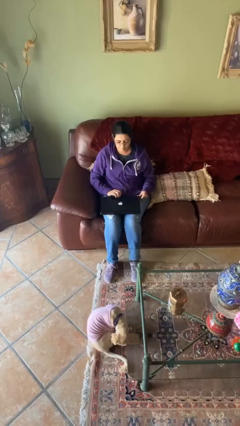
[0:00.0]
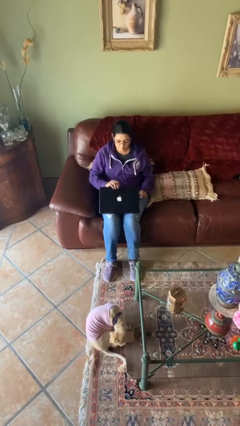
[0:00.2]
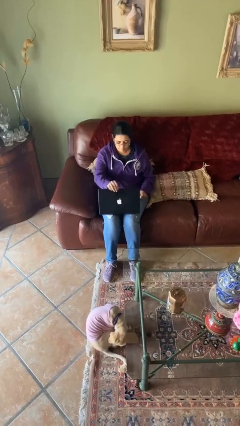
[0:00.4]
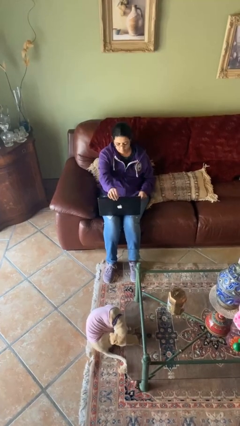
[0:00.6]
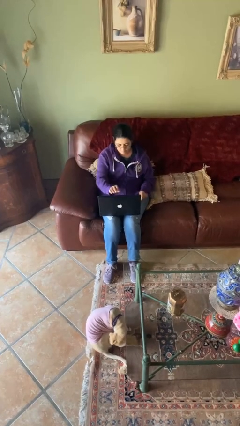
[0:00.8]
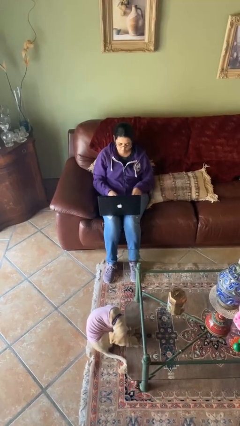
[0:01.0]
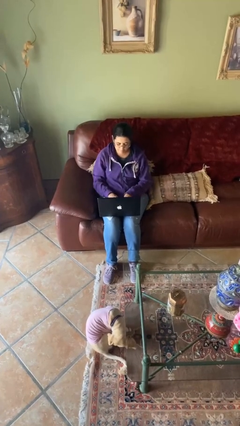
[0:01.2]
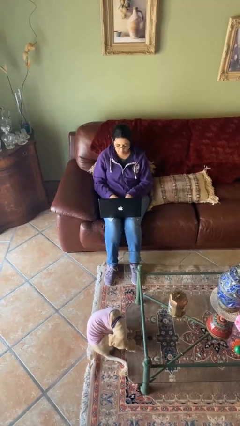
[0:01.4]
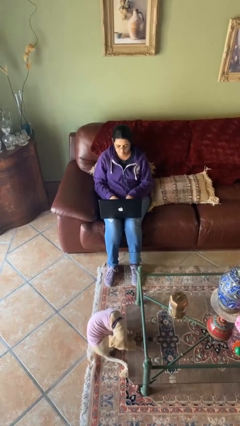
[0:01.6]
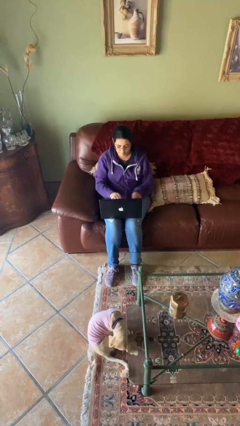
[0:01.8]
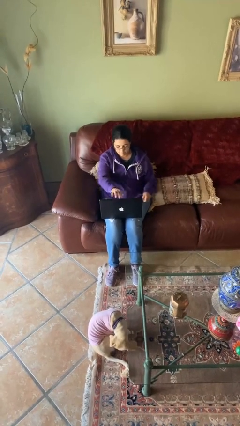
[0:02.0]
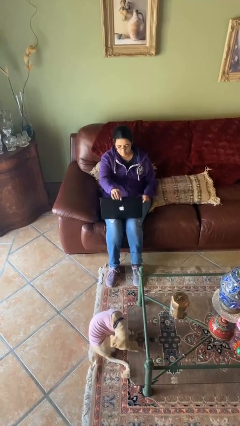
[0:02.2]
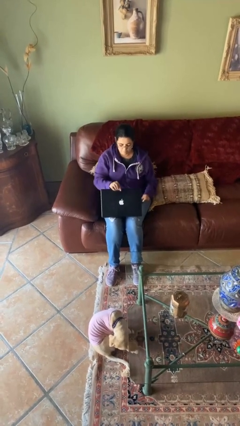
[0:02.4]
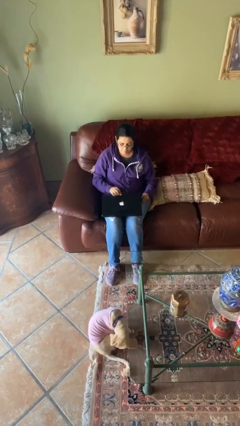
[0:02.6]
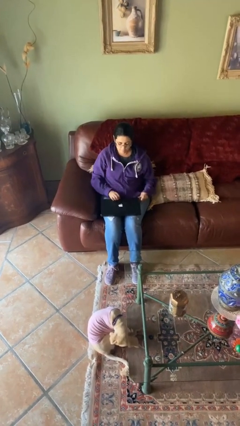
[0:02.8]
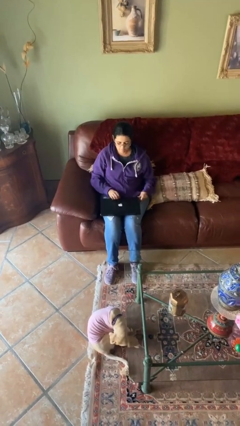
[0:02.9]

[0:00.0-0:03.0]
person interacts with laptop

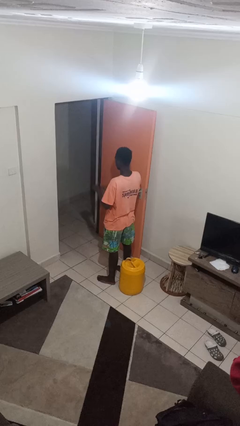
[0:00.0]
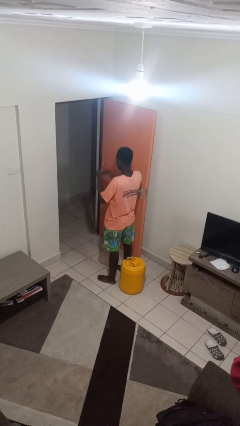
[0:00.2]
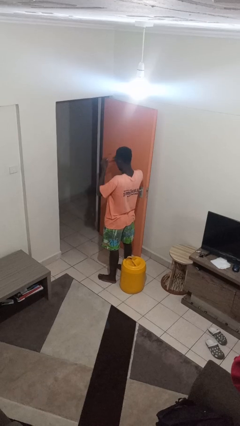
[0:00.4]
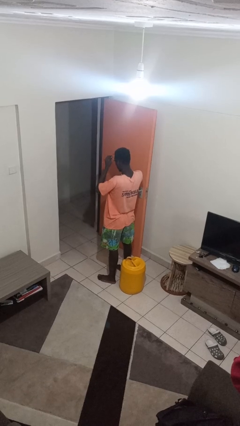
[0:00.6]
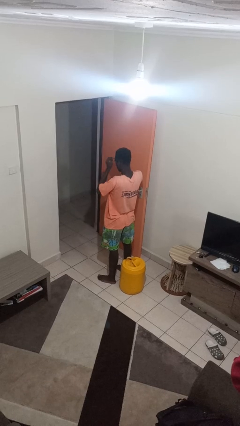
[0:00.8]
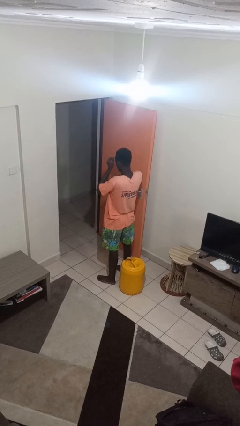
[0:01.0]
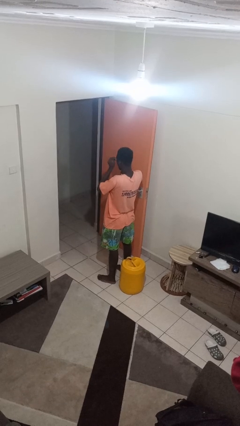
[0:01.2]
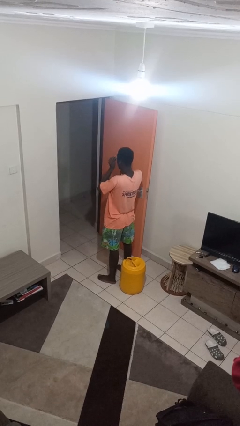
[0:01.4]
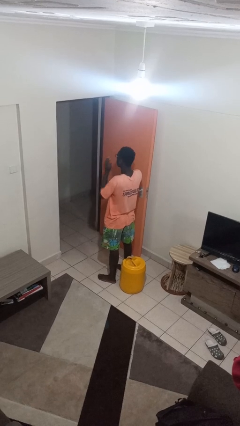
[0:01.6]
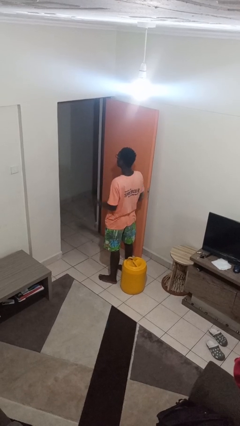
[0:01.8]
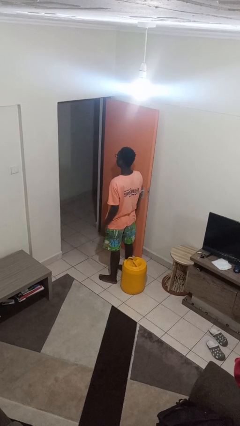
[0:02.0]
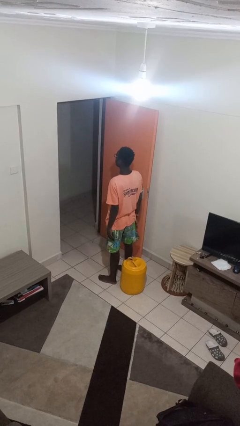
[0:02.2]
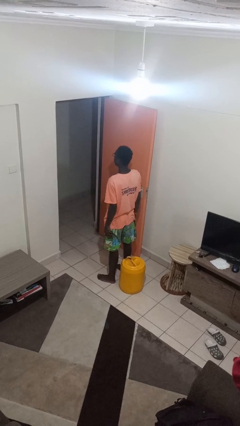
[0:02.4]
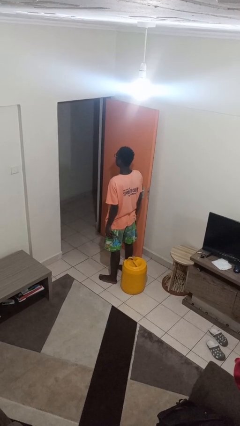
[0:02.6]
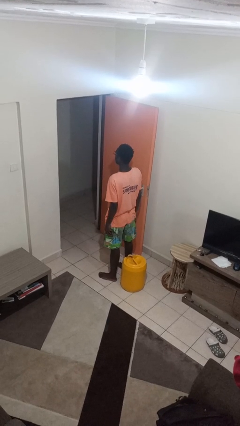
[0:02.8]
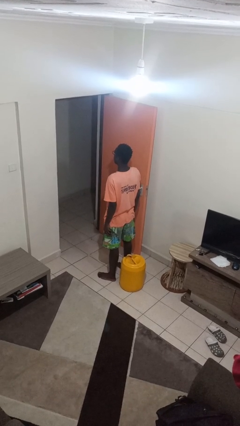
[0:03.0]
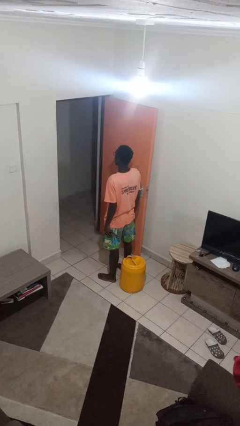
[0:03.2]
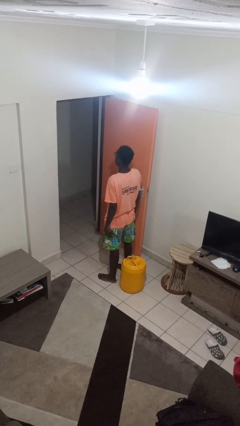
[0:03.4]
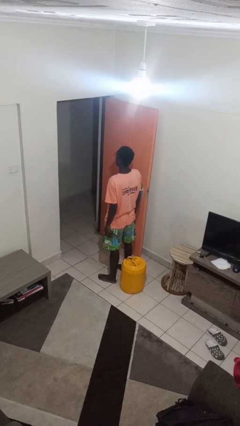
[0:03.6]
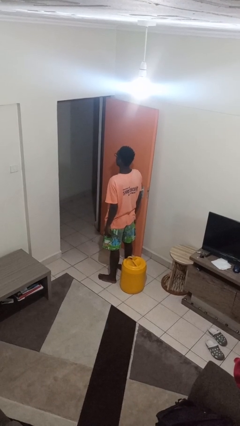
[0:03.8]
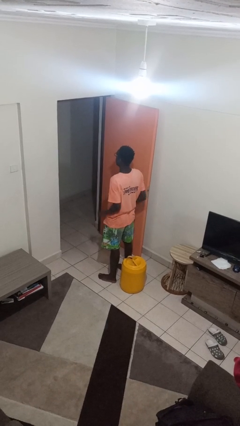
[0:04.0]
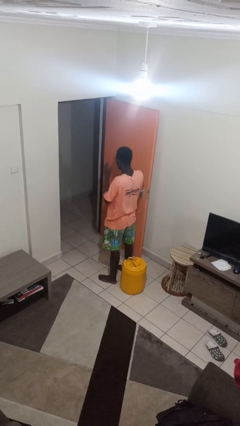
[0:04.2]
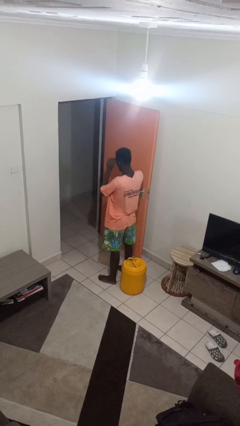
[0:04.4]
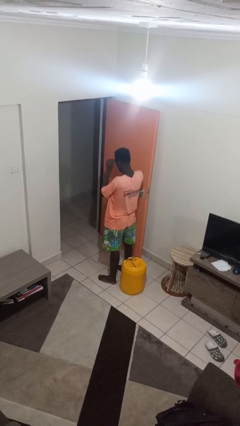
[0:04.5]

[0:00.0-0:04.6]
person puts on glasses

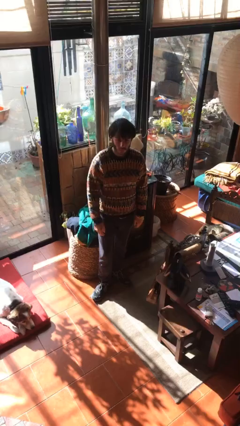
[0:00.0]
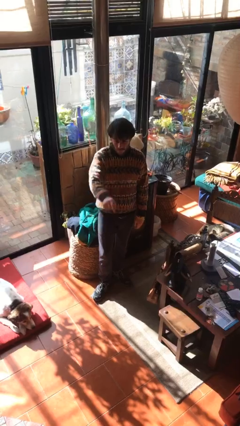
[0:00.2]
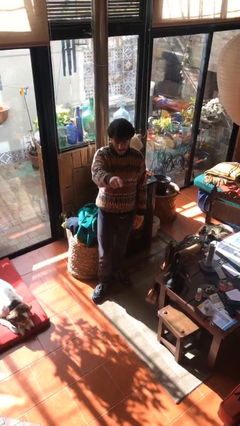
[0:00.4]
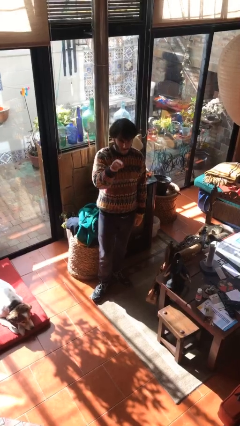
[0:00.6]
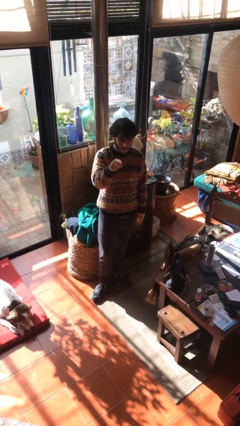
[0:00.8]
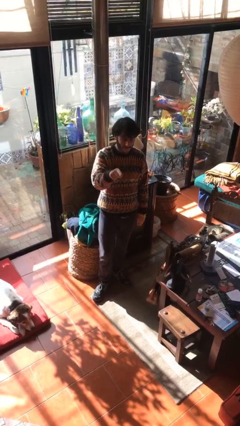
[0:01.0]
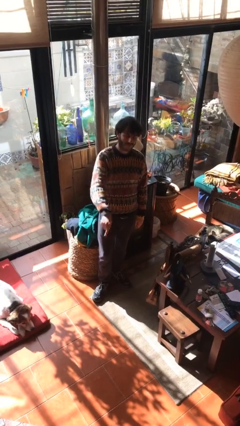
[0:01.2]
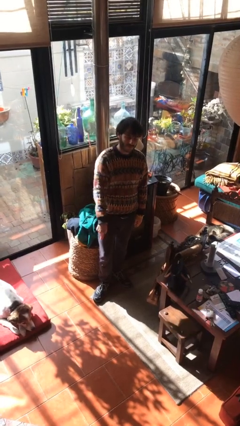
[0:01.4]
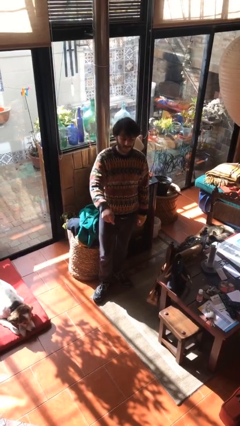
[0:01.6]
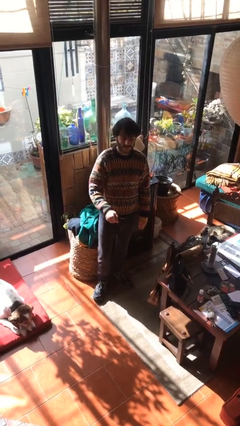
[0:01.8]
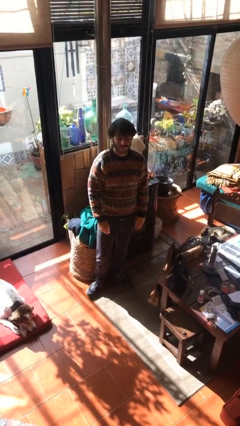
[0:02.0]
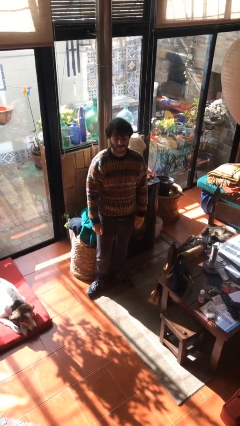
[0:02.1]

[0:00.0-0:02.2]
person points at person

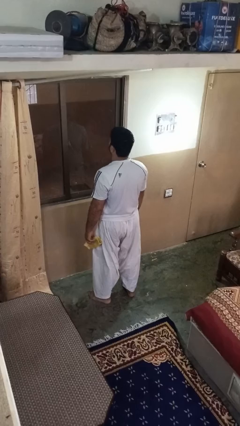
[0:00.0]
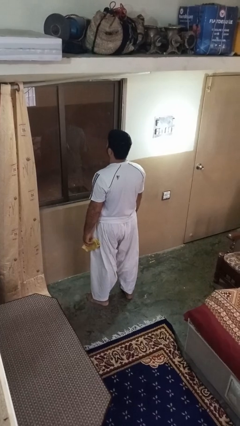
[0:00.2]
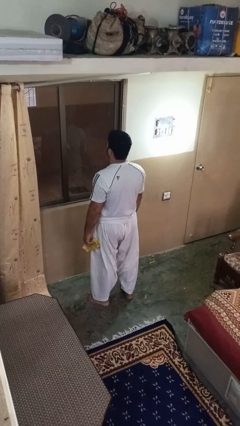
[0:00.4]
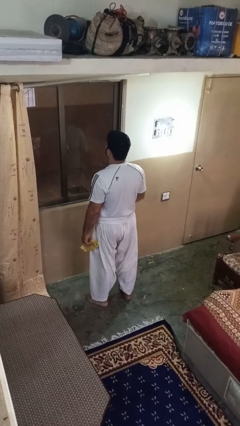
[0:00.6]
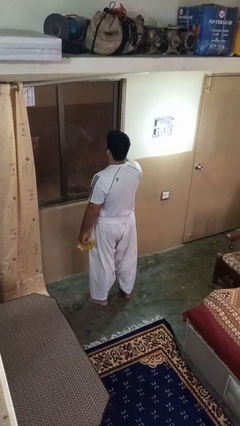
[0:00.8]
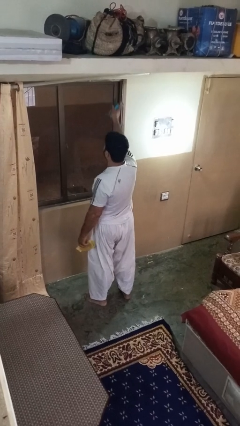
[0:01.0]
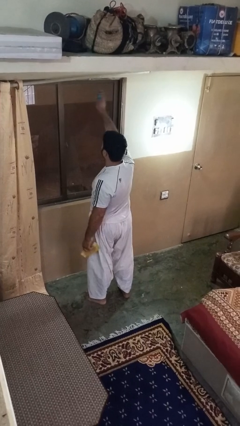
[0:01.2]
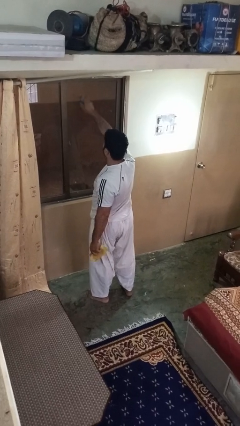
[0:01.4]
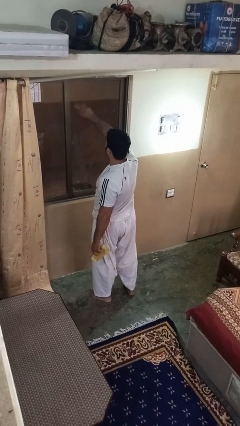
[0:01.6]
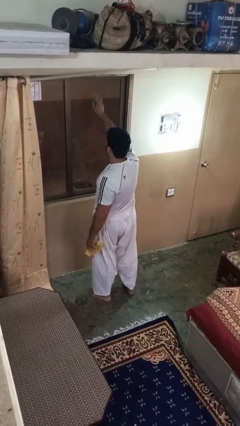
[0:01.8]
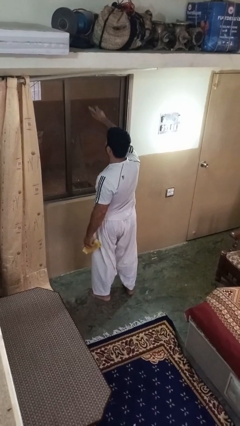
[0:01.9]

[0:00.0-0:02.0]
person sprays from bottle

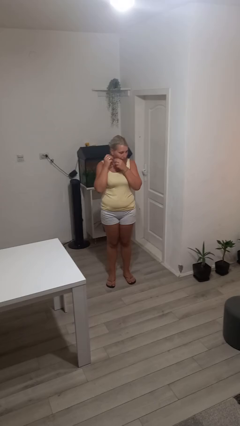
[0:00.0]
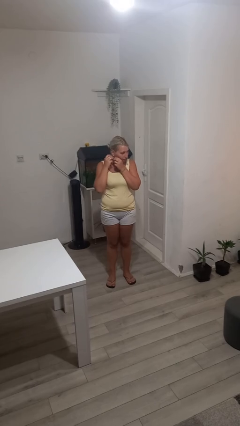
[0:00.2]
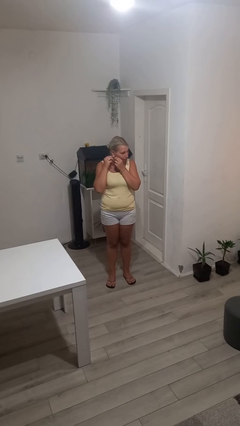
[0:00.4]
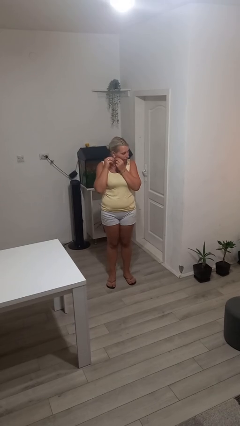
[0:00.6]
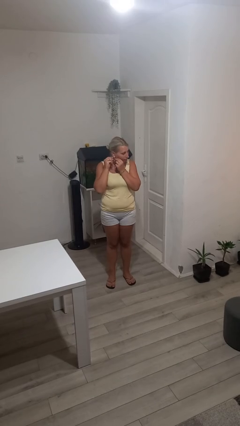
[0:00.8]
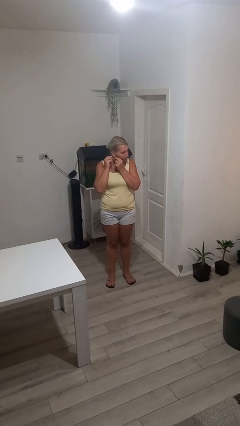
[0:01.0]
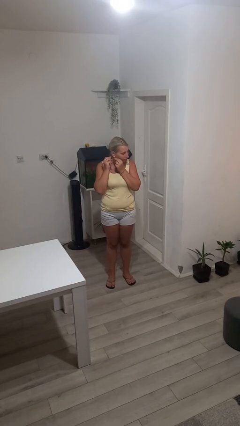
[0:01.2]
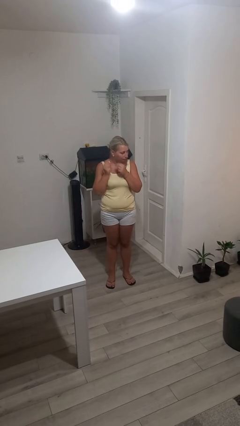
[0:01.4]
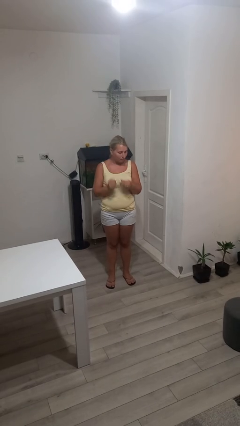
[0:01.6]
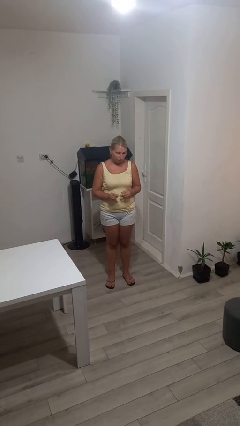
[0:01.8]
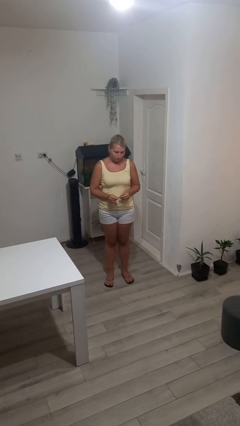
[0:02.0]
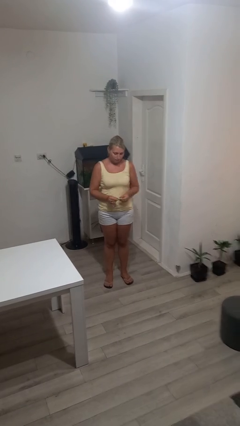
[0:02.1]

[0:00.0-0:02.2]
person takes off earrings

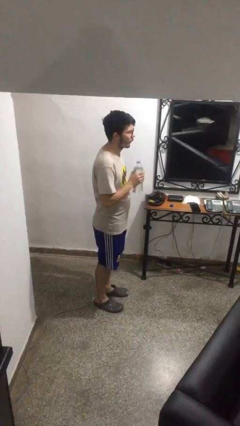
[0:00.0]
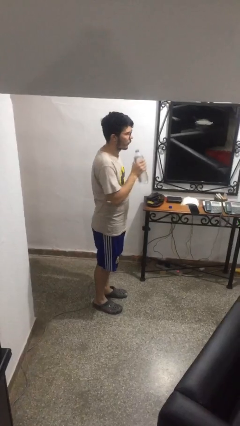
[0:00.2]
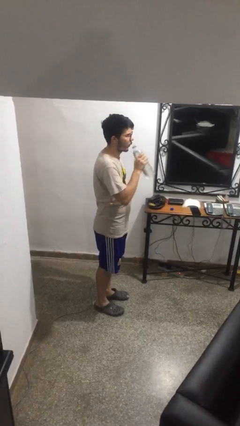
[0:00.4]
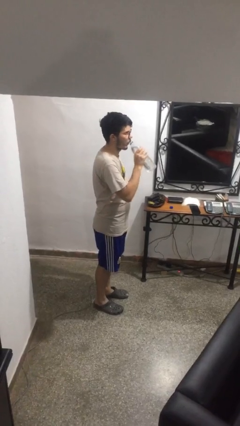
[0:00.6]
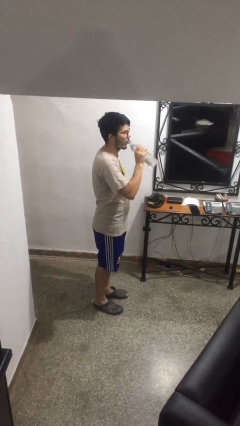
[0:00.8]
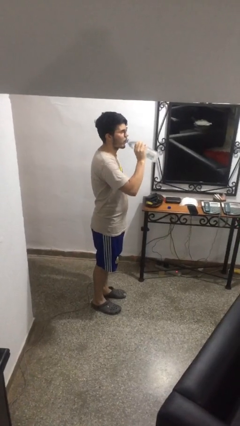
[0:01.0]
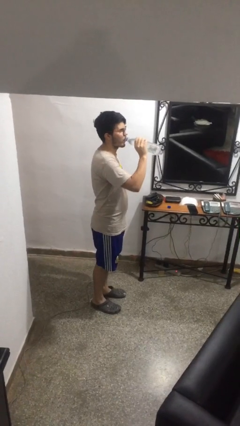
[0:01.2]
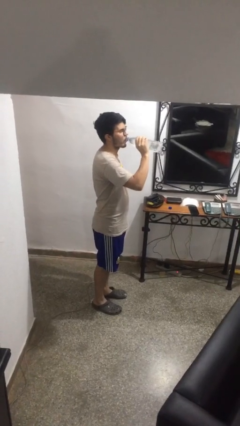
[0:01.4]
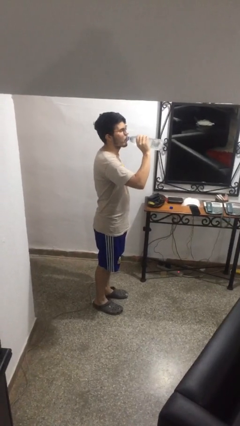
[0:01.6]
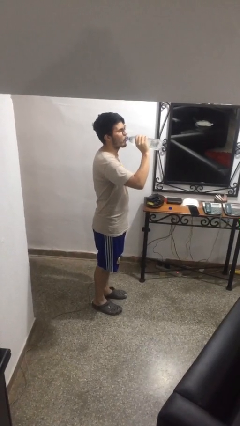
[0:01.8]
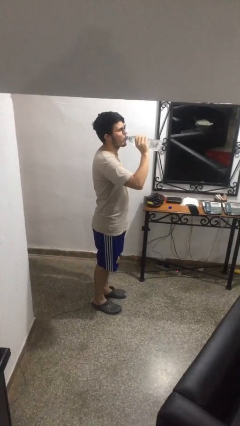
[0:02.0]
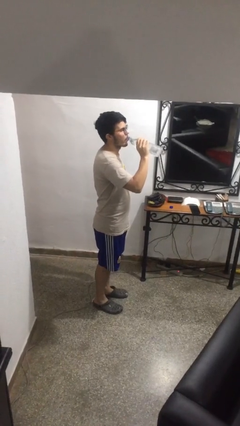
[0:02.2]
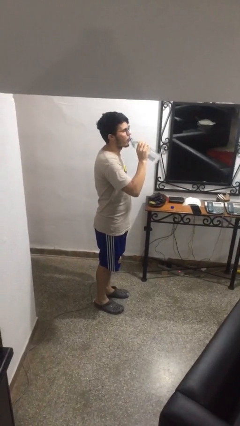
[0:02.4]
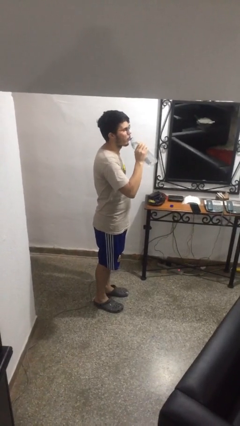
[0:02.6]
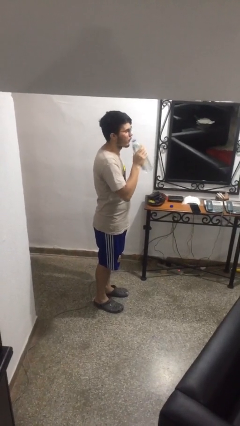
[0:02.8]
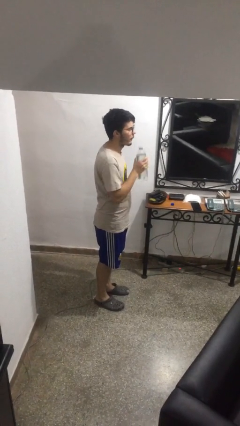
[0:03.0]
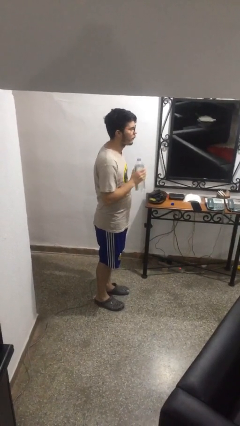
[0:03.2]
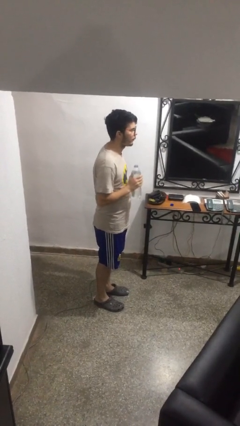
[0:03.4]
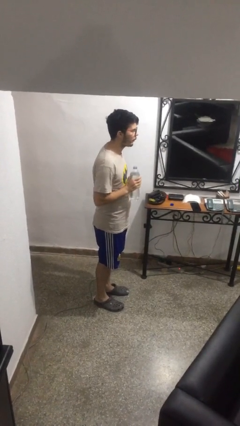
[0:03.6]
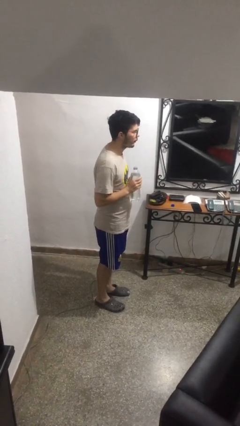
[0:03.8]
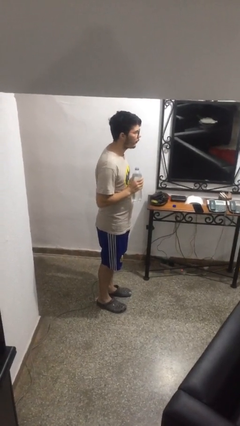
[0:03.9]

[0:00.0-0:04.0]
person drinks from bottle
